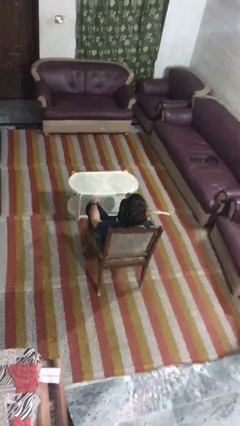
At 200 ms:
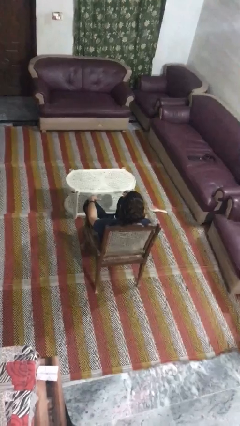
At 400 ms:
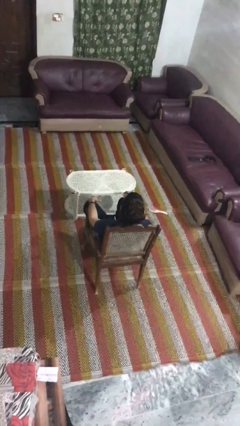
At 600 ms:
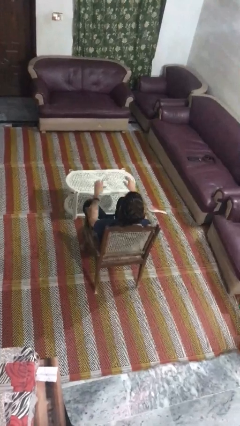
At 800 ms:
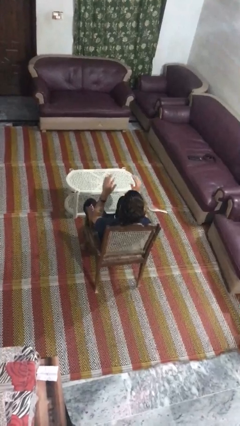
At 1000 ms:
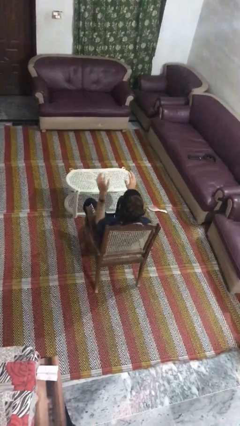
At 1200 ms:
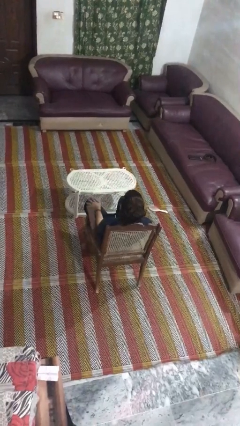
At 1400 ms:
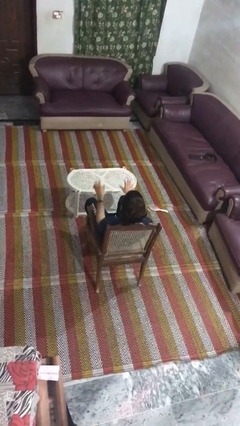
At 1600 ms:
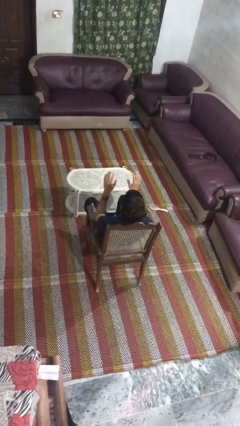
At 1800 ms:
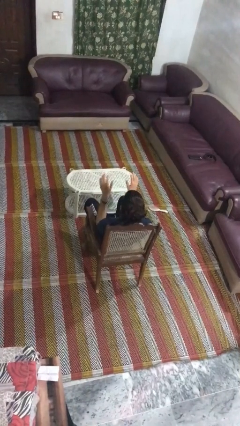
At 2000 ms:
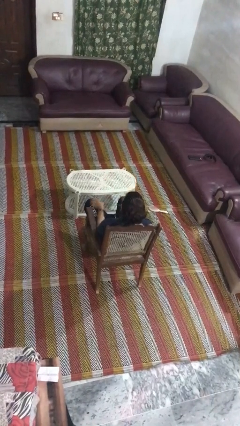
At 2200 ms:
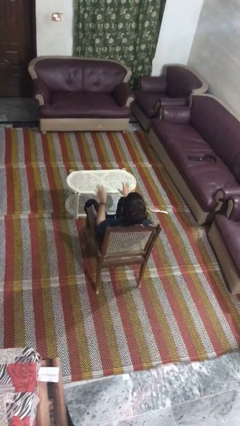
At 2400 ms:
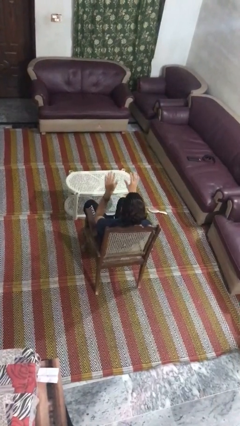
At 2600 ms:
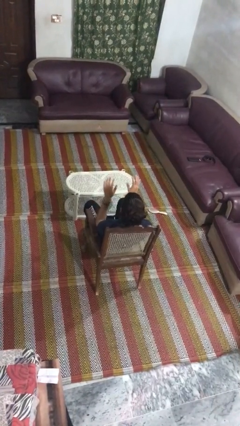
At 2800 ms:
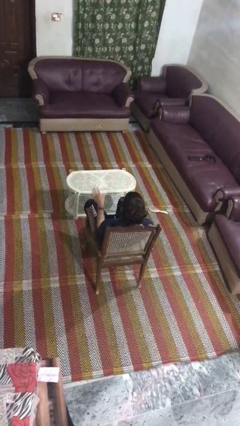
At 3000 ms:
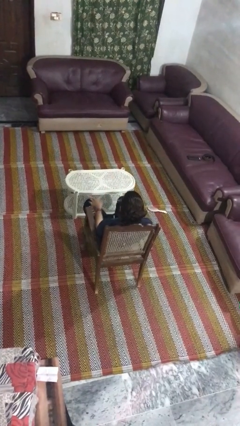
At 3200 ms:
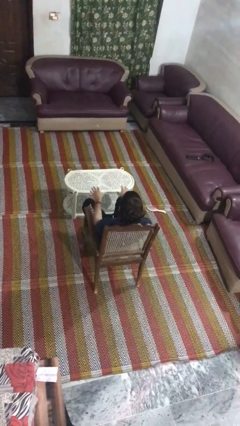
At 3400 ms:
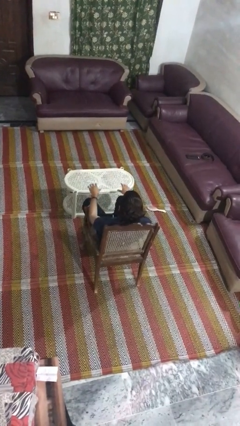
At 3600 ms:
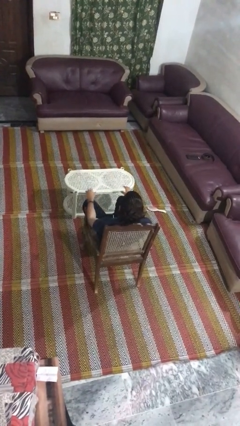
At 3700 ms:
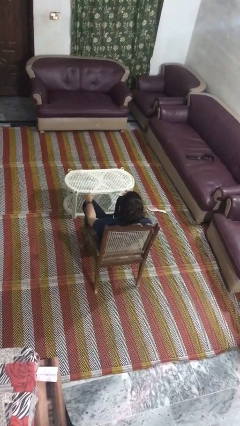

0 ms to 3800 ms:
person slaps hands on thighs

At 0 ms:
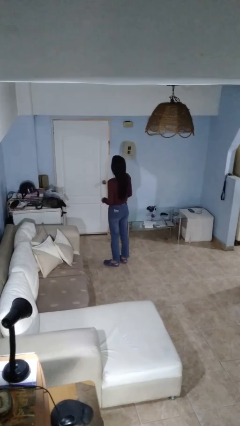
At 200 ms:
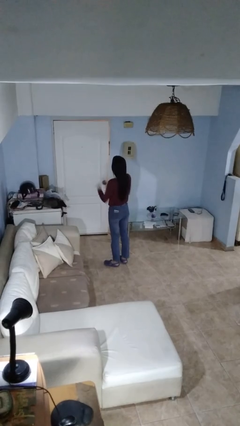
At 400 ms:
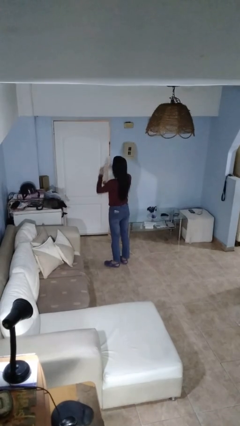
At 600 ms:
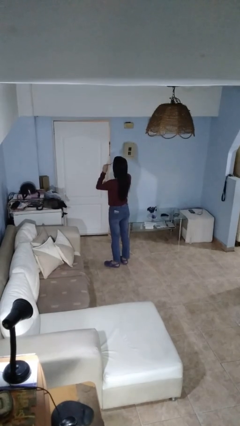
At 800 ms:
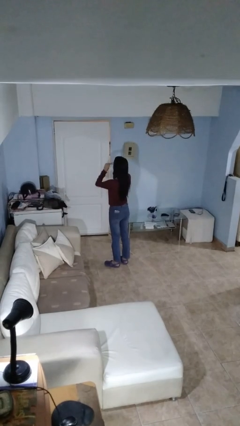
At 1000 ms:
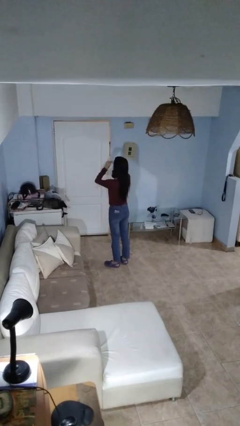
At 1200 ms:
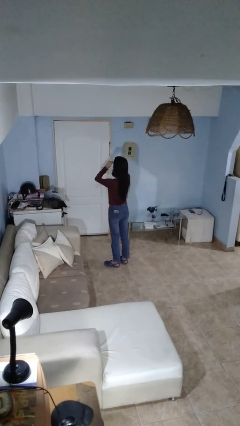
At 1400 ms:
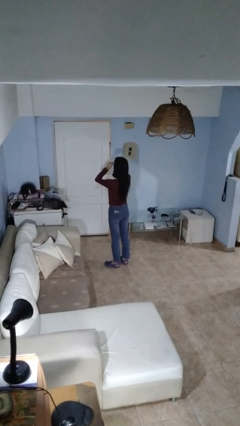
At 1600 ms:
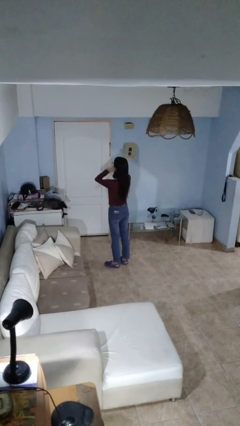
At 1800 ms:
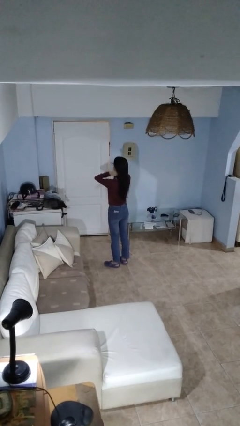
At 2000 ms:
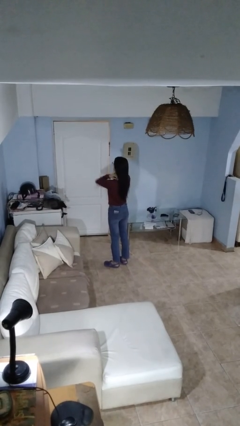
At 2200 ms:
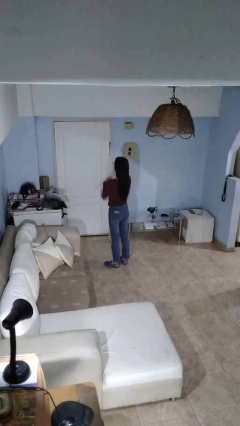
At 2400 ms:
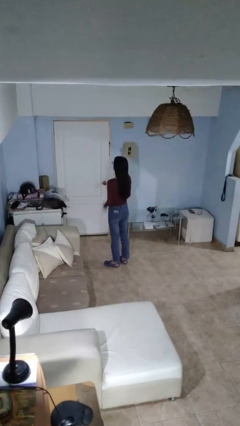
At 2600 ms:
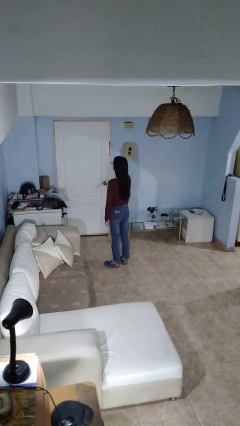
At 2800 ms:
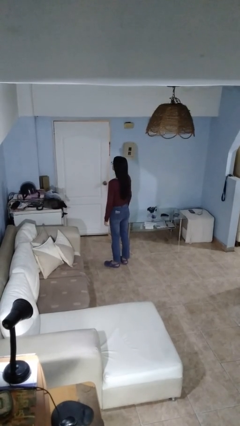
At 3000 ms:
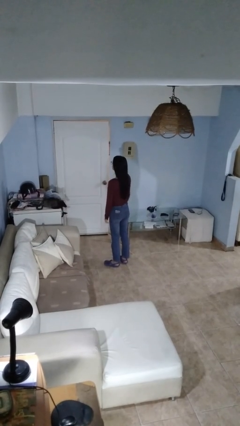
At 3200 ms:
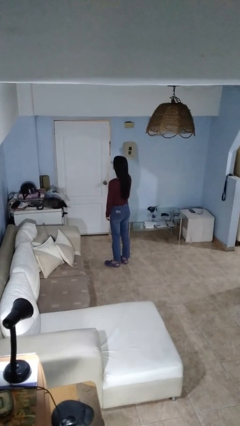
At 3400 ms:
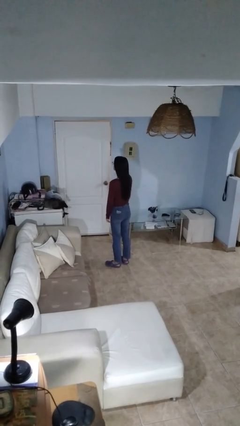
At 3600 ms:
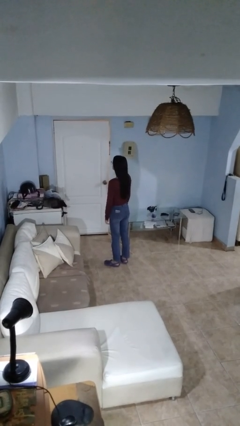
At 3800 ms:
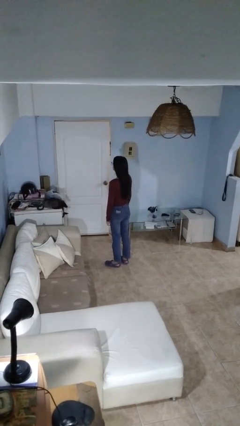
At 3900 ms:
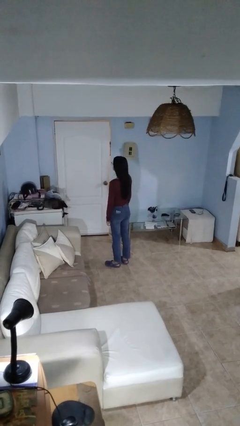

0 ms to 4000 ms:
person puts on glasses

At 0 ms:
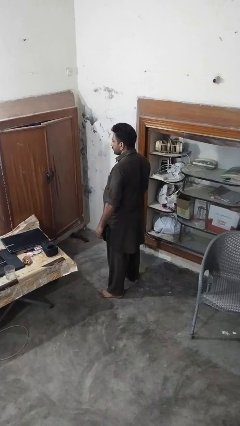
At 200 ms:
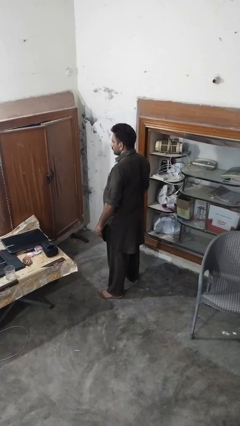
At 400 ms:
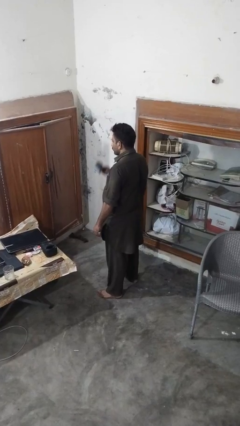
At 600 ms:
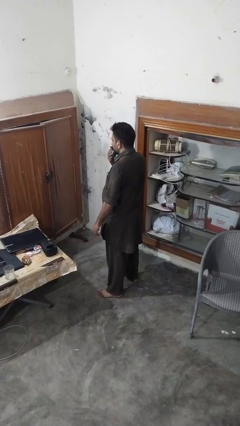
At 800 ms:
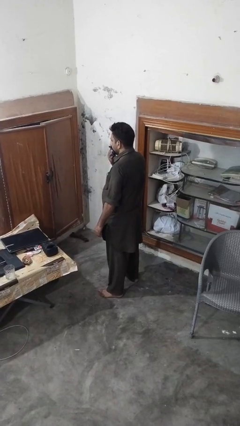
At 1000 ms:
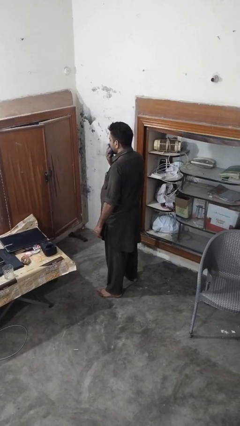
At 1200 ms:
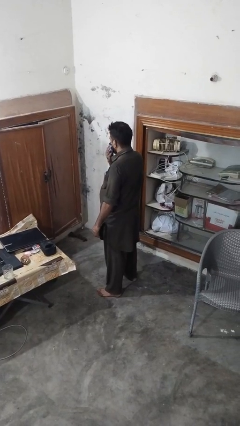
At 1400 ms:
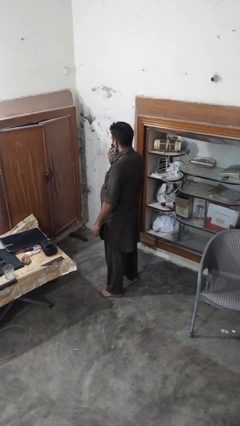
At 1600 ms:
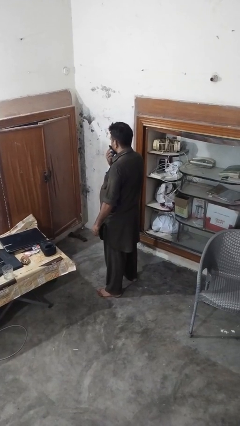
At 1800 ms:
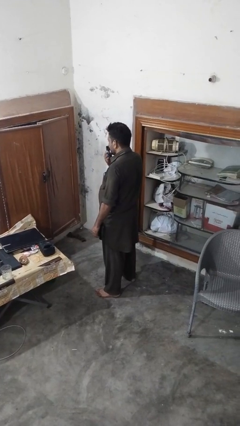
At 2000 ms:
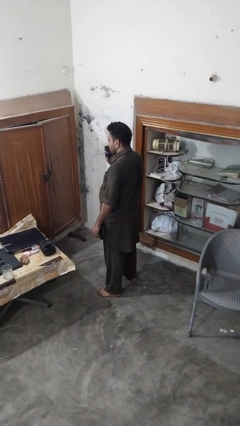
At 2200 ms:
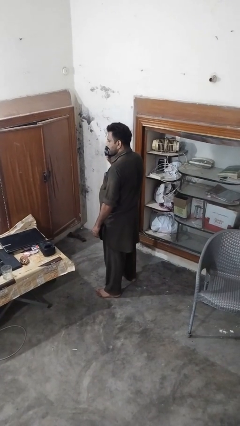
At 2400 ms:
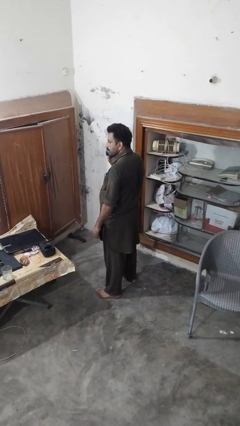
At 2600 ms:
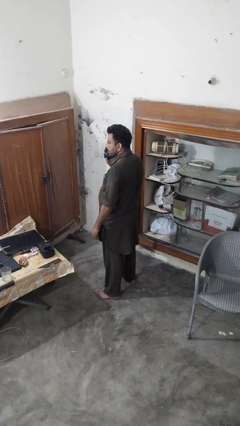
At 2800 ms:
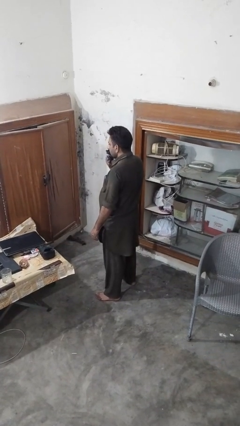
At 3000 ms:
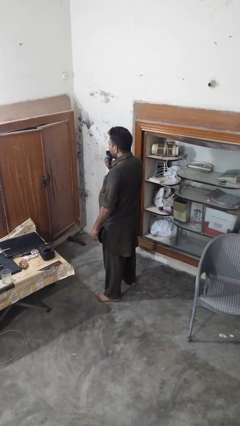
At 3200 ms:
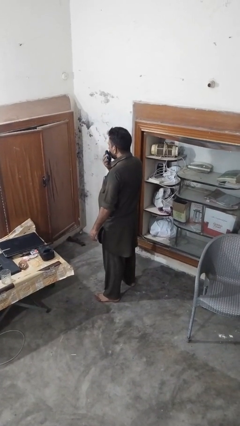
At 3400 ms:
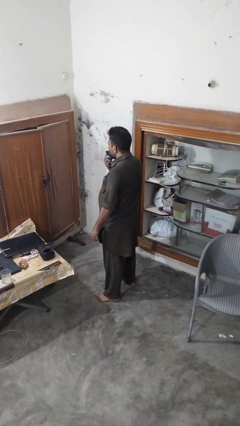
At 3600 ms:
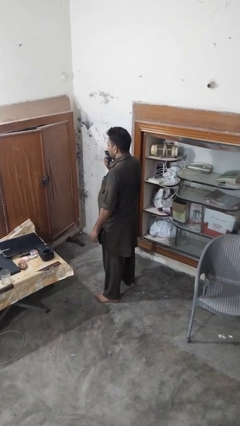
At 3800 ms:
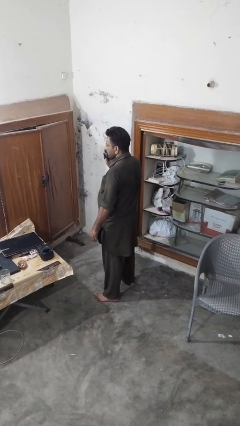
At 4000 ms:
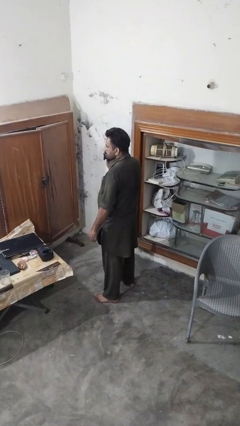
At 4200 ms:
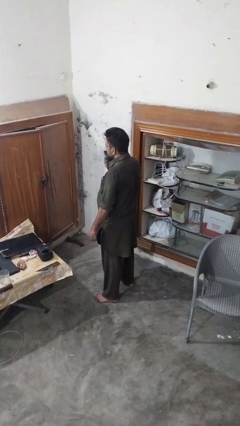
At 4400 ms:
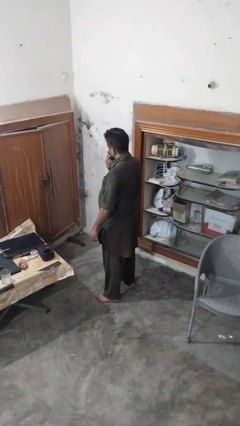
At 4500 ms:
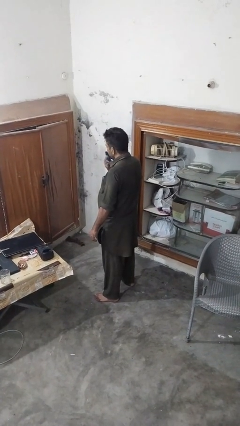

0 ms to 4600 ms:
person wipes mouth with napkin

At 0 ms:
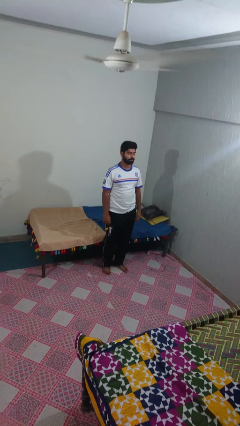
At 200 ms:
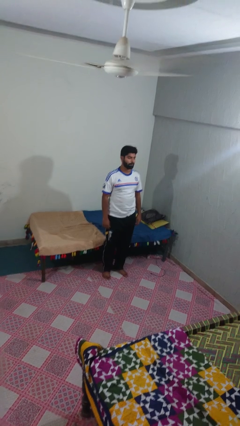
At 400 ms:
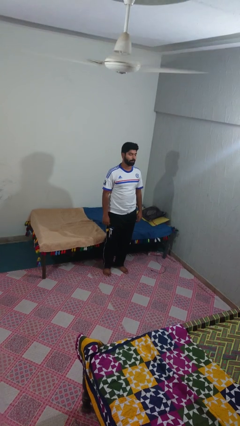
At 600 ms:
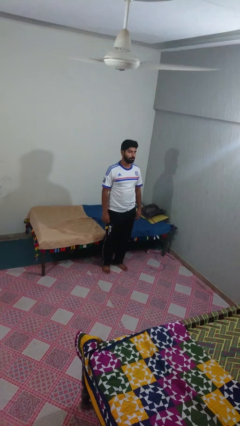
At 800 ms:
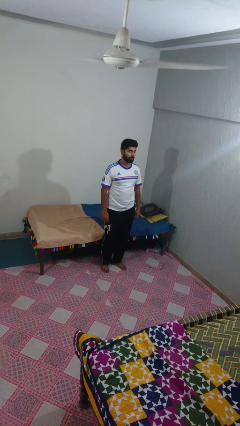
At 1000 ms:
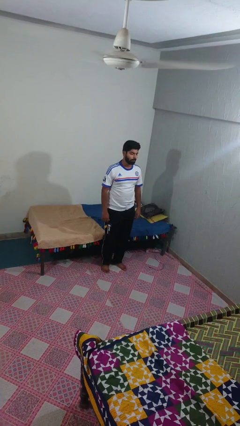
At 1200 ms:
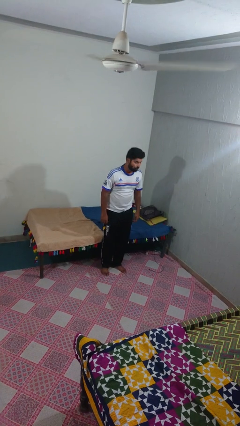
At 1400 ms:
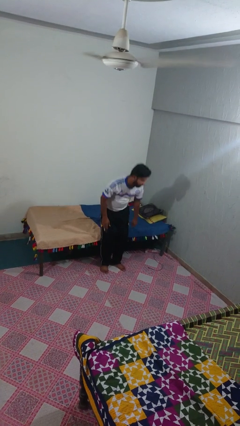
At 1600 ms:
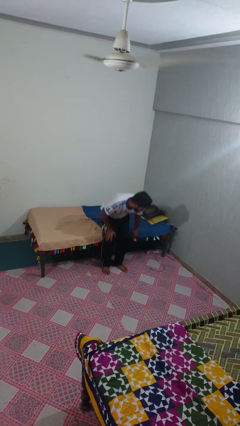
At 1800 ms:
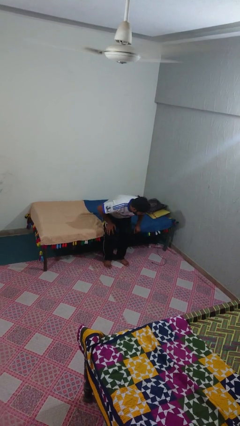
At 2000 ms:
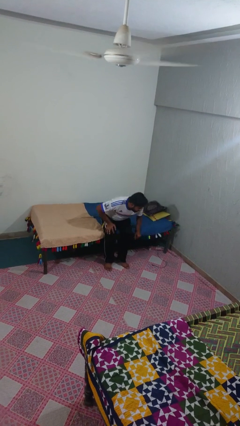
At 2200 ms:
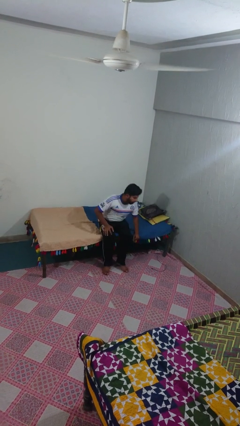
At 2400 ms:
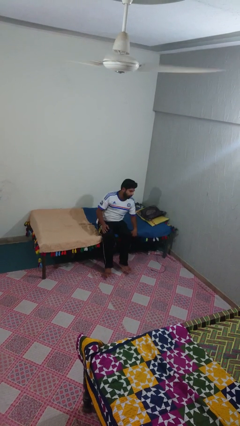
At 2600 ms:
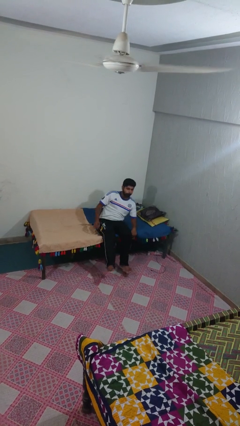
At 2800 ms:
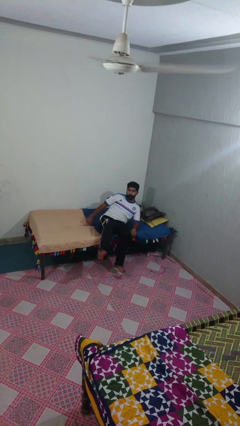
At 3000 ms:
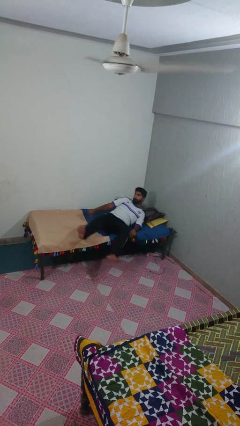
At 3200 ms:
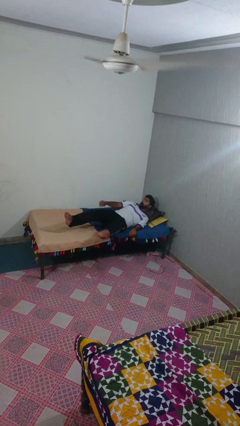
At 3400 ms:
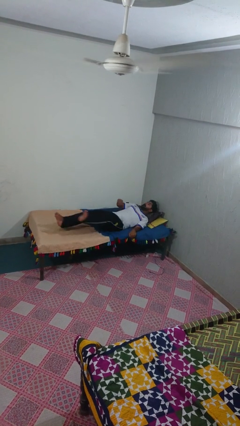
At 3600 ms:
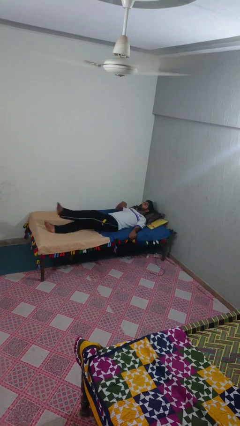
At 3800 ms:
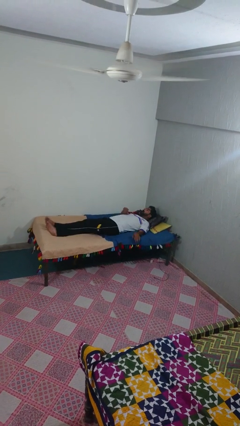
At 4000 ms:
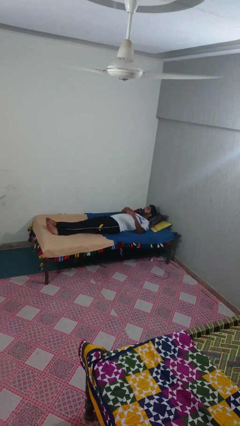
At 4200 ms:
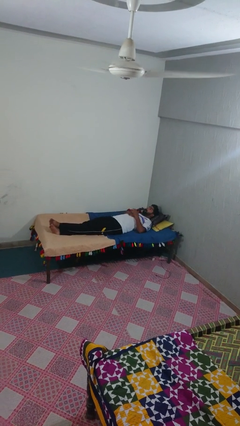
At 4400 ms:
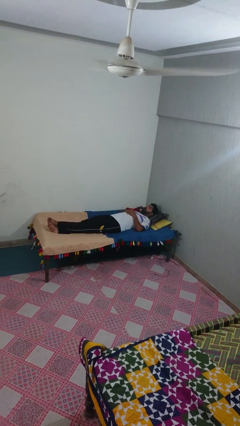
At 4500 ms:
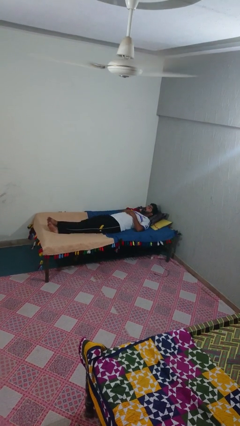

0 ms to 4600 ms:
person lies down on bed

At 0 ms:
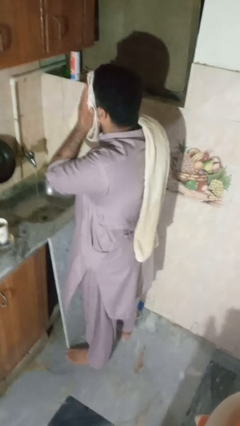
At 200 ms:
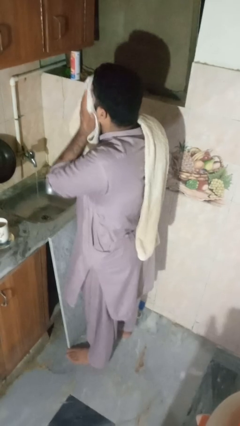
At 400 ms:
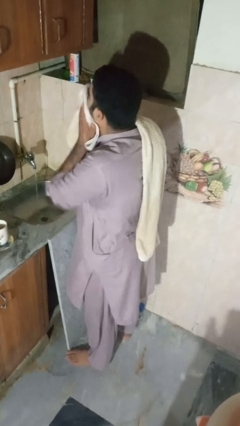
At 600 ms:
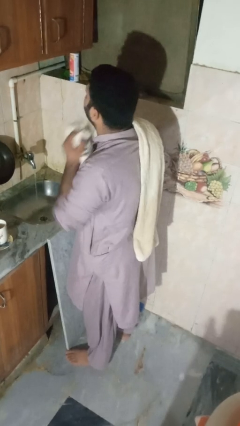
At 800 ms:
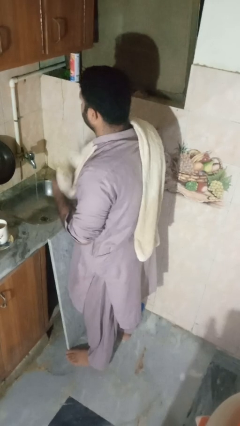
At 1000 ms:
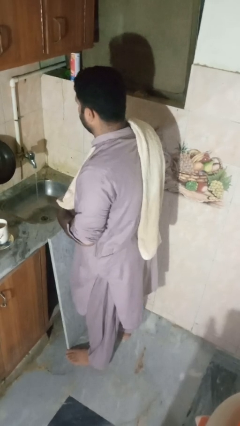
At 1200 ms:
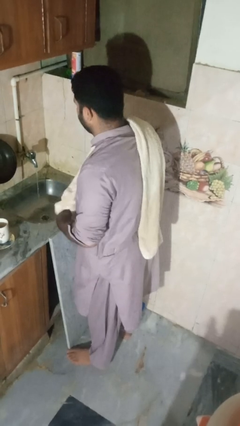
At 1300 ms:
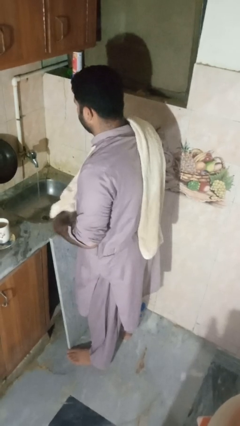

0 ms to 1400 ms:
person dries face with towel
